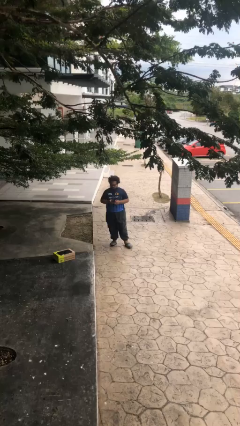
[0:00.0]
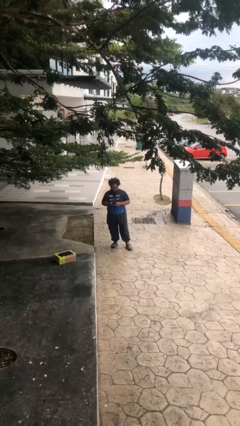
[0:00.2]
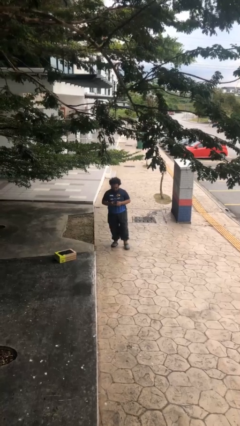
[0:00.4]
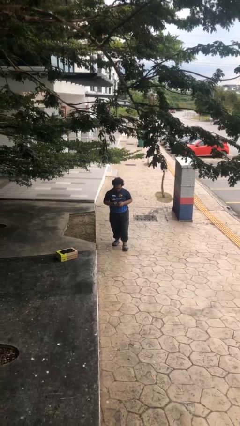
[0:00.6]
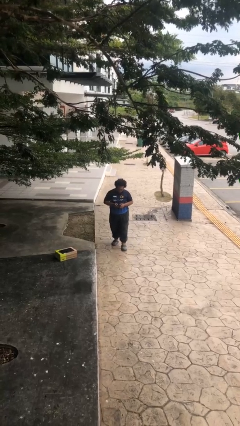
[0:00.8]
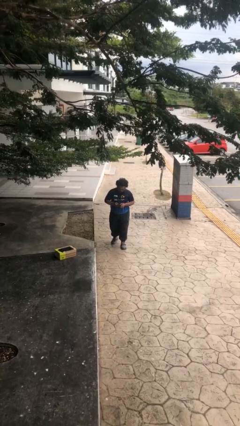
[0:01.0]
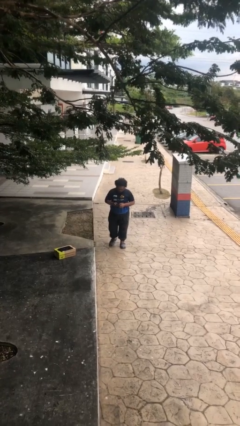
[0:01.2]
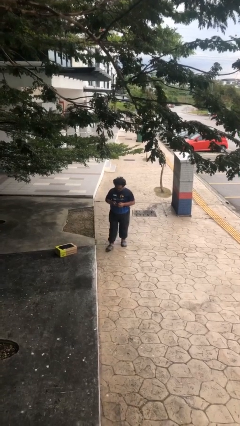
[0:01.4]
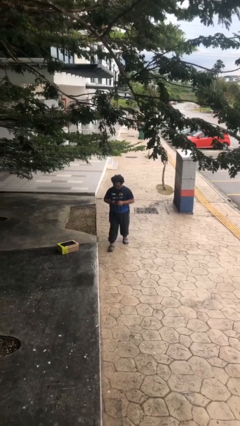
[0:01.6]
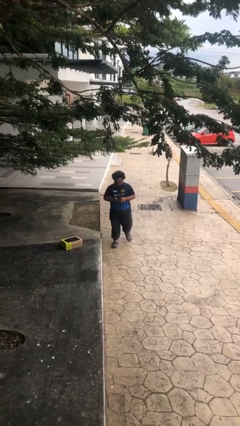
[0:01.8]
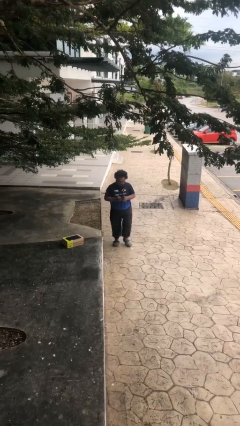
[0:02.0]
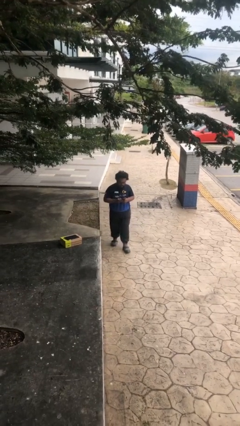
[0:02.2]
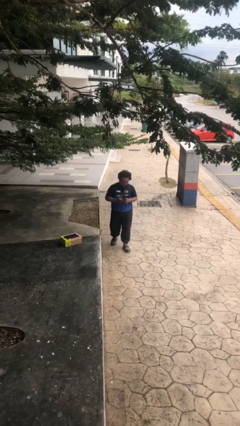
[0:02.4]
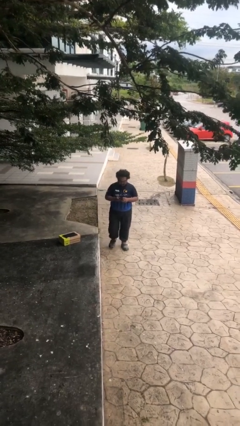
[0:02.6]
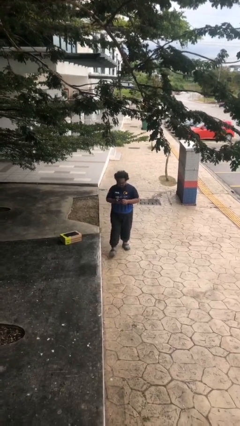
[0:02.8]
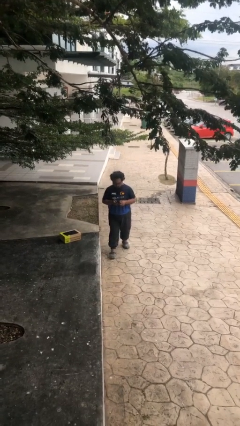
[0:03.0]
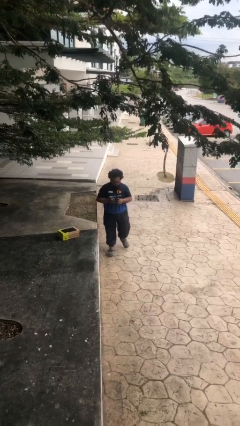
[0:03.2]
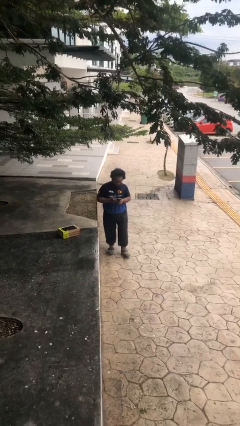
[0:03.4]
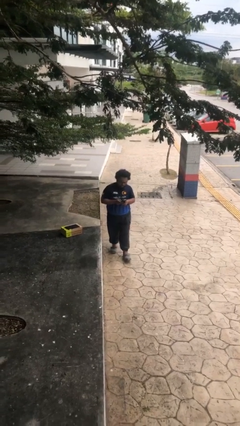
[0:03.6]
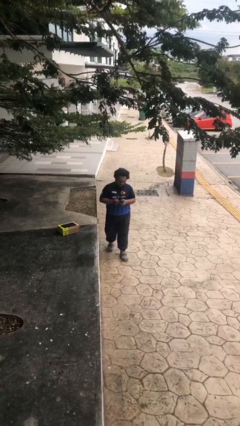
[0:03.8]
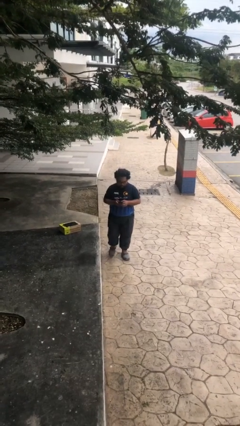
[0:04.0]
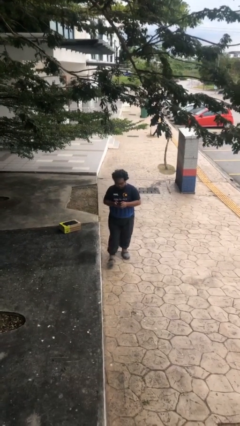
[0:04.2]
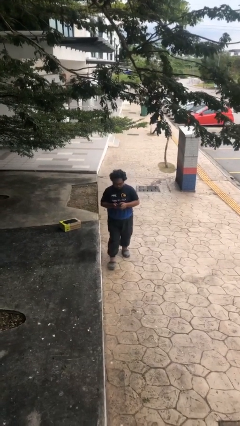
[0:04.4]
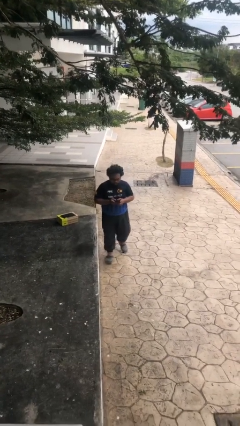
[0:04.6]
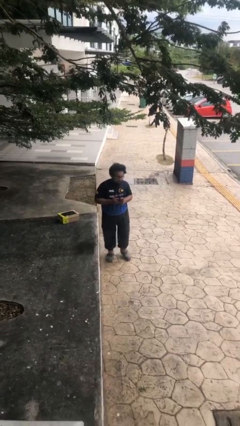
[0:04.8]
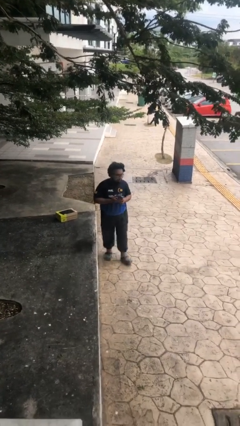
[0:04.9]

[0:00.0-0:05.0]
person texts on phone

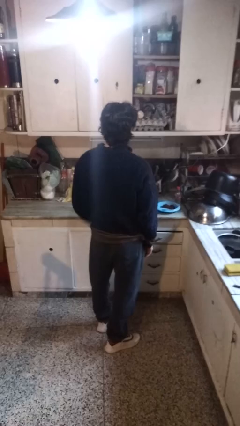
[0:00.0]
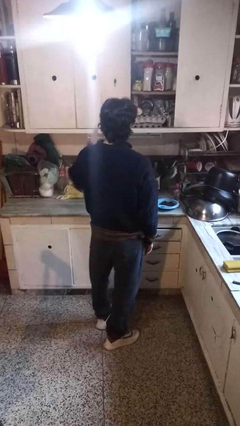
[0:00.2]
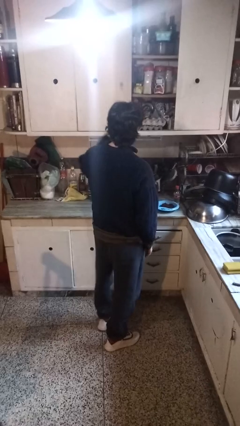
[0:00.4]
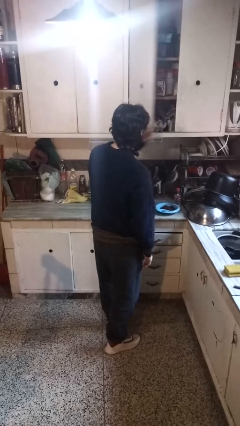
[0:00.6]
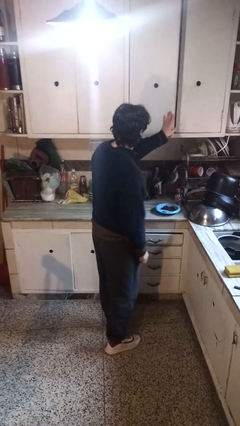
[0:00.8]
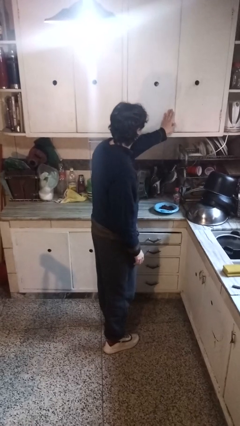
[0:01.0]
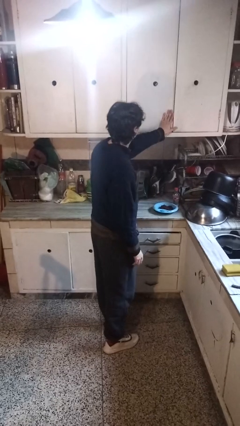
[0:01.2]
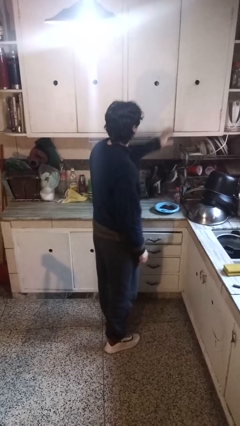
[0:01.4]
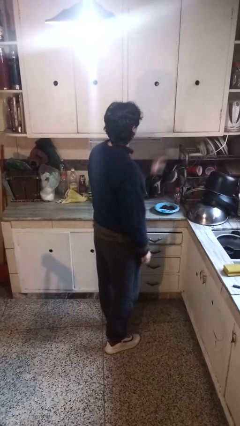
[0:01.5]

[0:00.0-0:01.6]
person closes cabinet

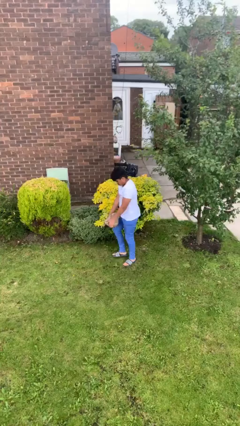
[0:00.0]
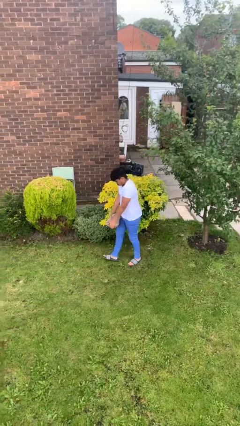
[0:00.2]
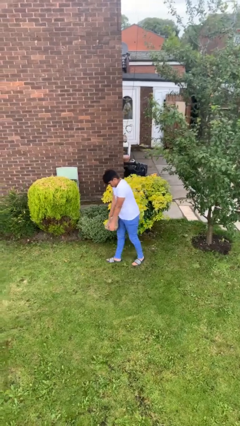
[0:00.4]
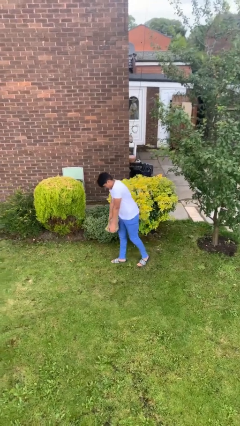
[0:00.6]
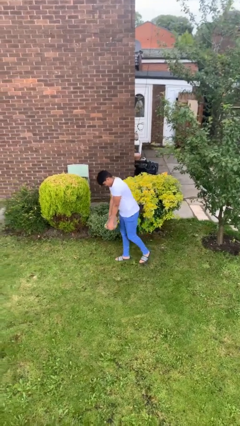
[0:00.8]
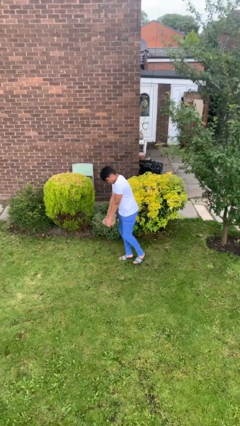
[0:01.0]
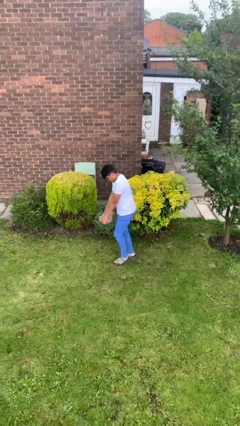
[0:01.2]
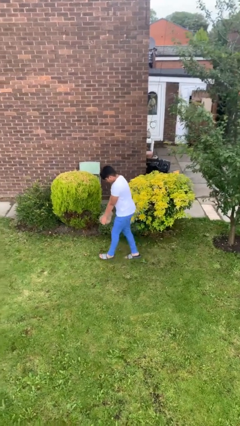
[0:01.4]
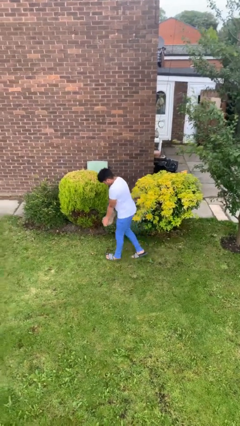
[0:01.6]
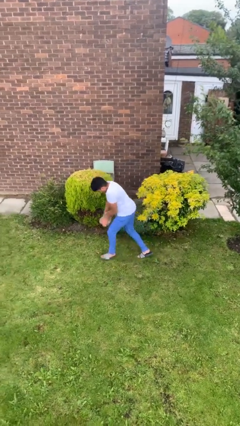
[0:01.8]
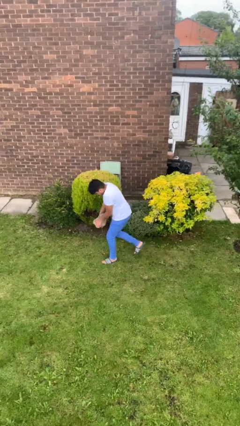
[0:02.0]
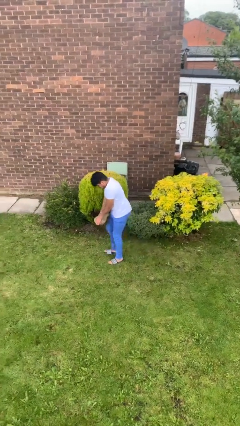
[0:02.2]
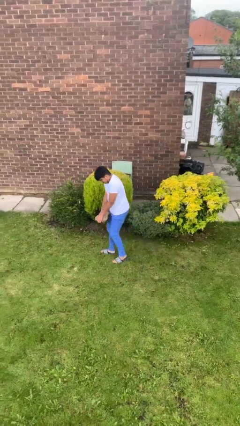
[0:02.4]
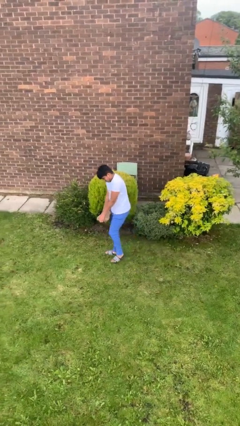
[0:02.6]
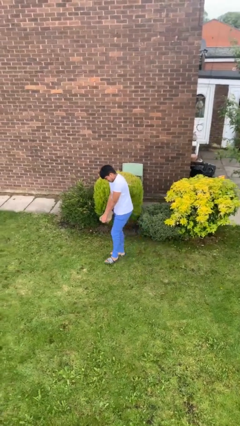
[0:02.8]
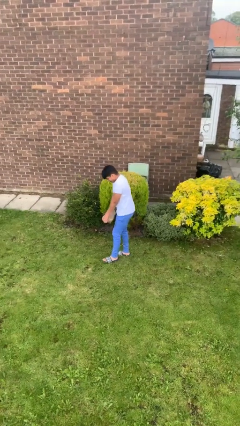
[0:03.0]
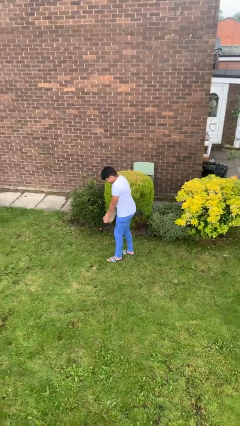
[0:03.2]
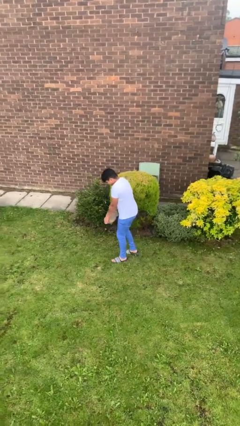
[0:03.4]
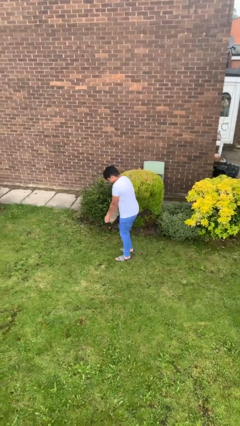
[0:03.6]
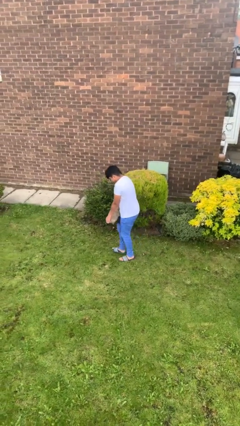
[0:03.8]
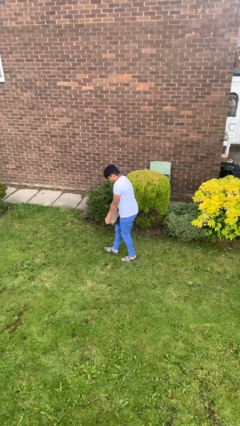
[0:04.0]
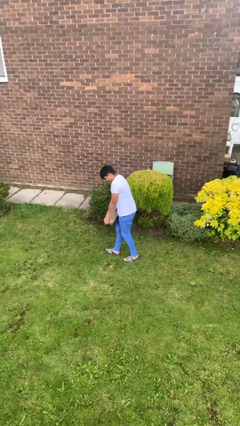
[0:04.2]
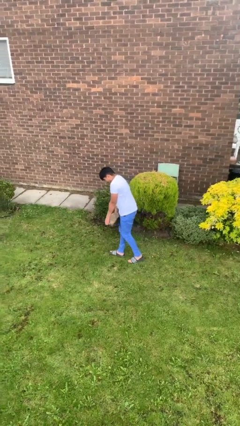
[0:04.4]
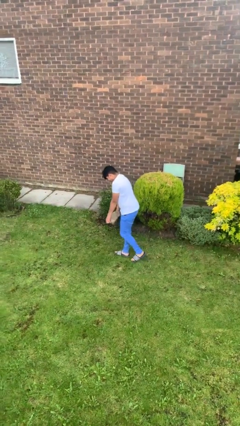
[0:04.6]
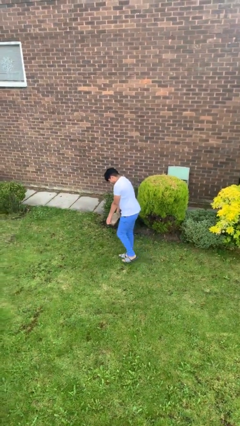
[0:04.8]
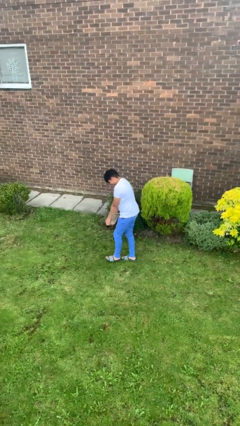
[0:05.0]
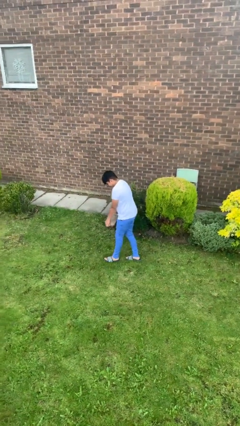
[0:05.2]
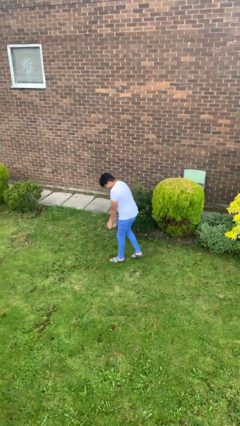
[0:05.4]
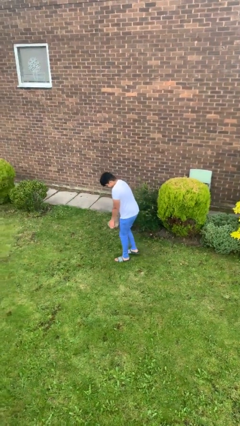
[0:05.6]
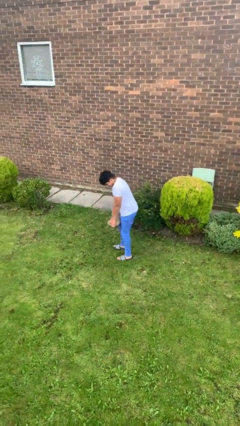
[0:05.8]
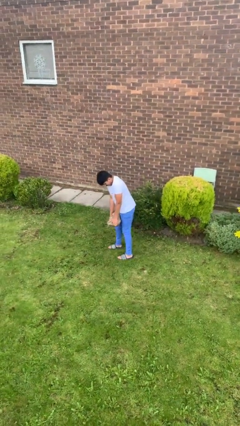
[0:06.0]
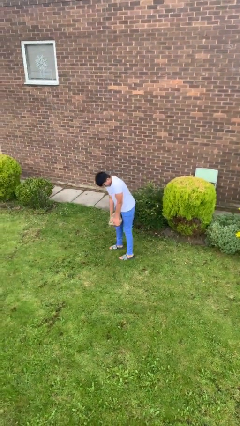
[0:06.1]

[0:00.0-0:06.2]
person carries heavy object

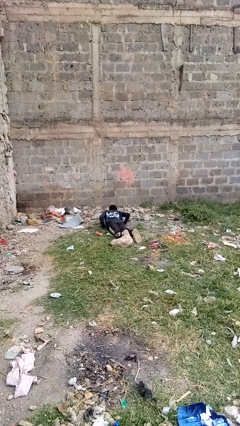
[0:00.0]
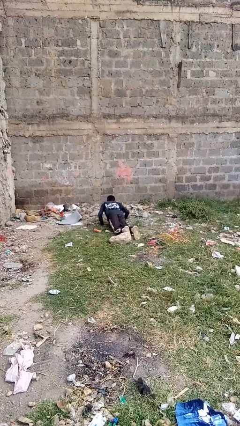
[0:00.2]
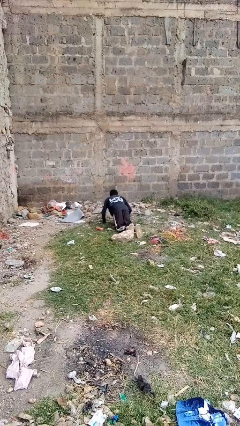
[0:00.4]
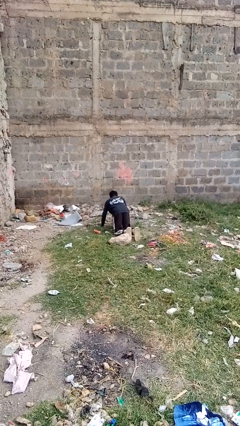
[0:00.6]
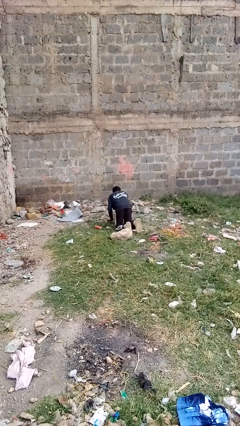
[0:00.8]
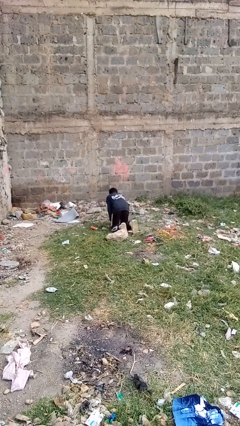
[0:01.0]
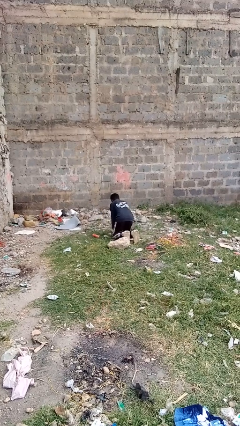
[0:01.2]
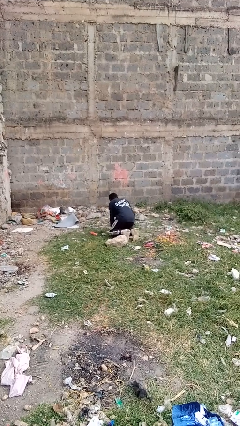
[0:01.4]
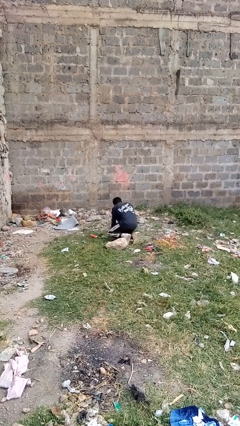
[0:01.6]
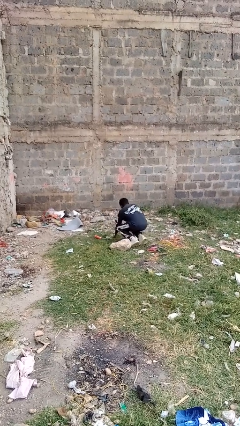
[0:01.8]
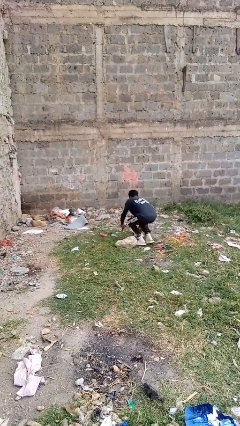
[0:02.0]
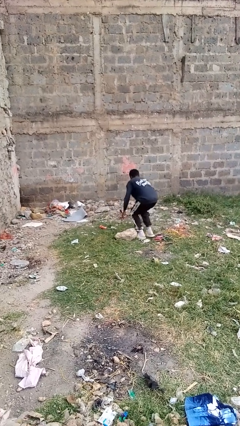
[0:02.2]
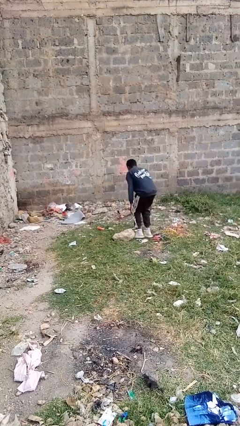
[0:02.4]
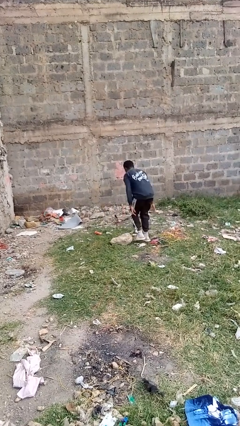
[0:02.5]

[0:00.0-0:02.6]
person stands up from floor

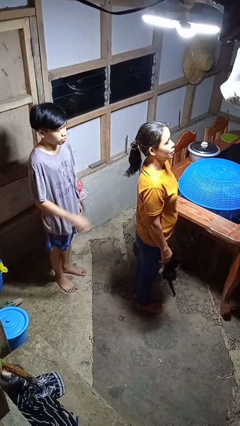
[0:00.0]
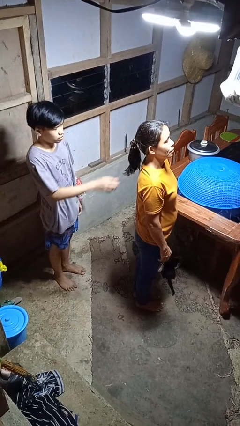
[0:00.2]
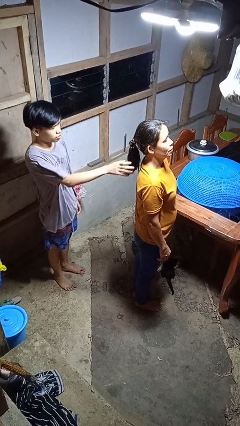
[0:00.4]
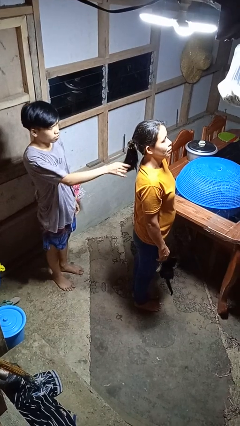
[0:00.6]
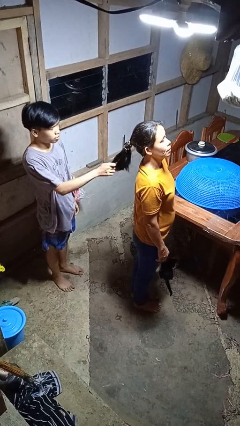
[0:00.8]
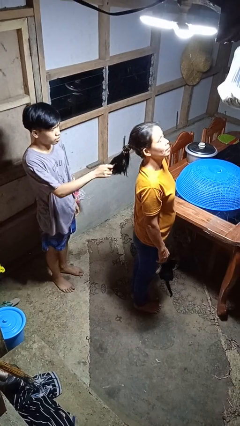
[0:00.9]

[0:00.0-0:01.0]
person grabs person by hair

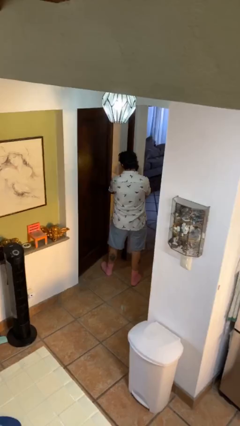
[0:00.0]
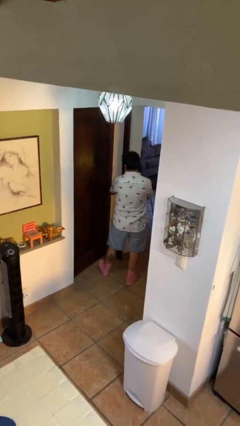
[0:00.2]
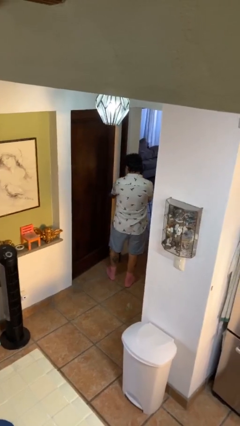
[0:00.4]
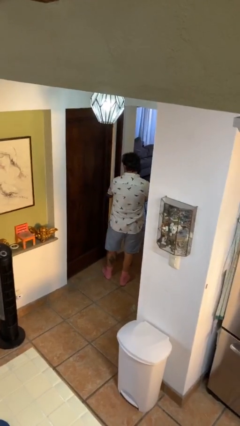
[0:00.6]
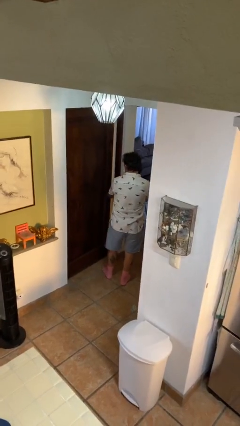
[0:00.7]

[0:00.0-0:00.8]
person closes facility door

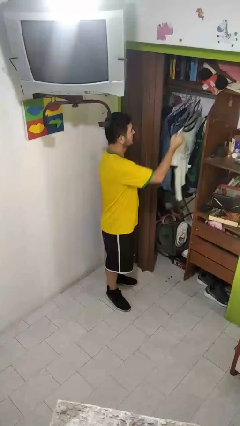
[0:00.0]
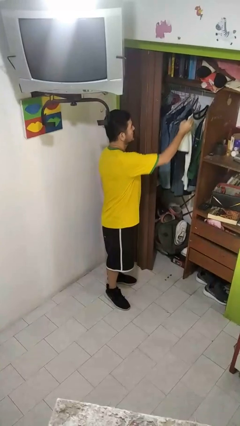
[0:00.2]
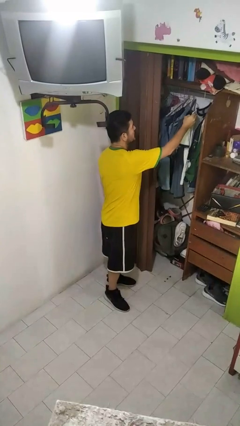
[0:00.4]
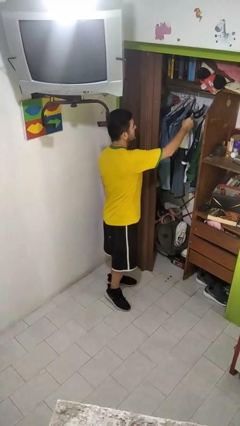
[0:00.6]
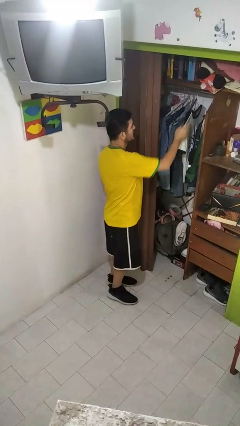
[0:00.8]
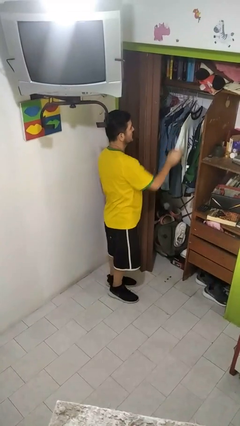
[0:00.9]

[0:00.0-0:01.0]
person puts clothes into closet
